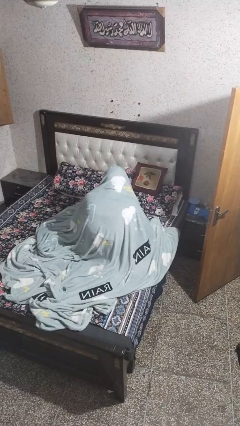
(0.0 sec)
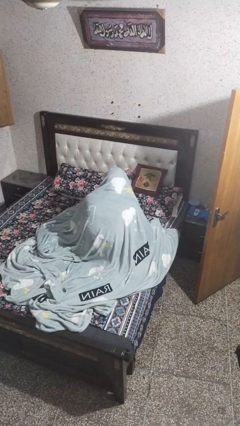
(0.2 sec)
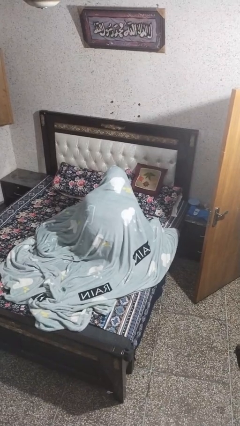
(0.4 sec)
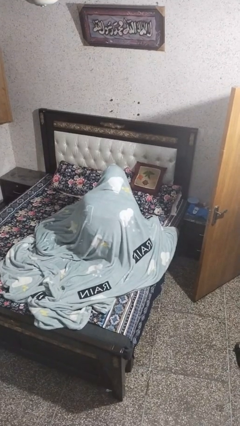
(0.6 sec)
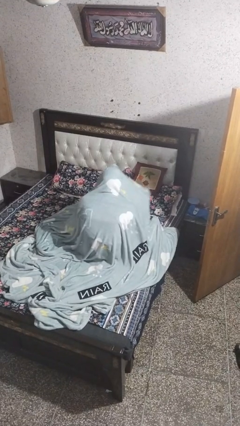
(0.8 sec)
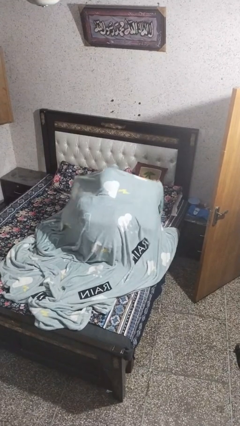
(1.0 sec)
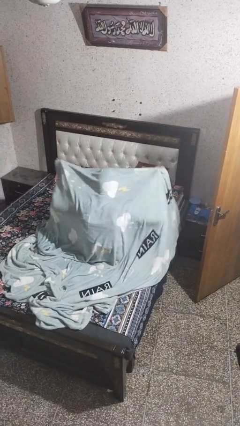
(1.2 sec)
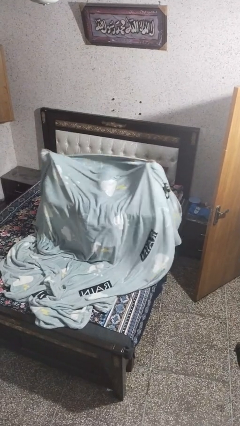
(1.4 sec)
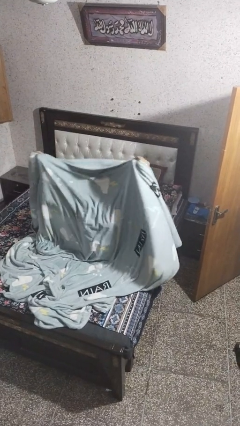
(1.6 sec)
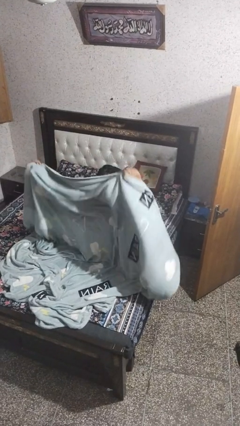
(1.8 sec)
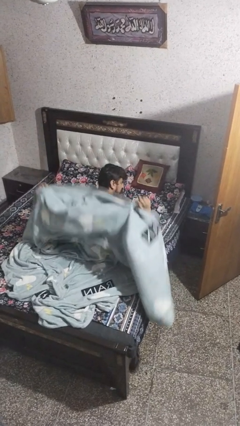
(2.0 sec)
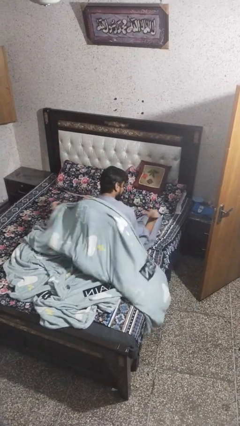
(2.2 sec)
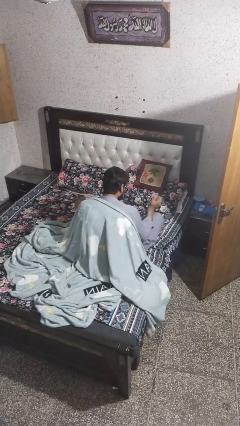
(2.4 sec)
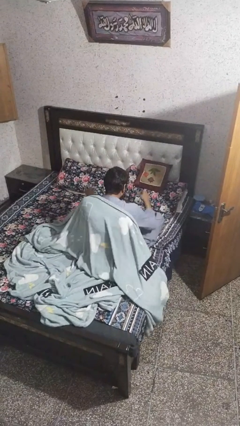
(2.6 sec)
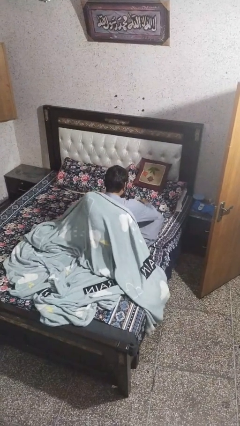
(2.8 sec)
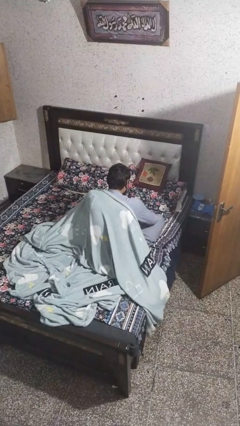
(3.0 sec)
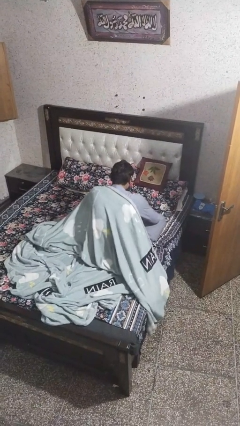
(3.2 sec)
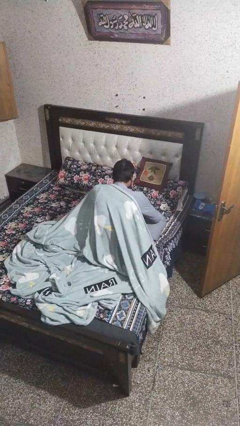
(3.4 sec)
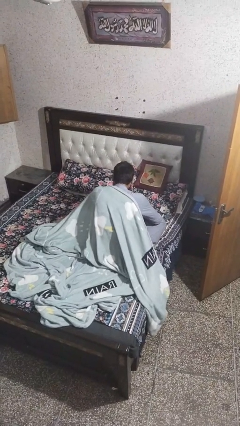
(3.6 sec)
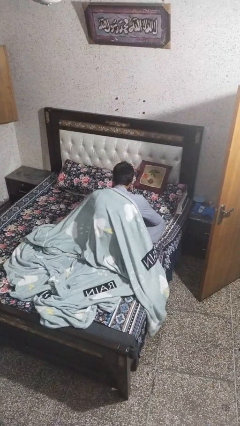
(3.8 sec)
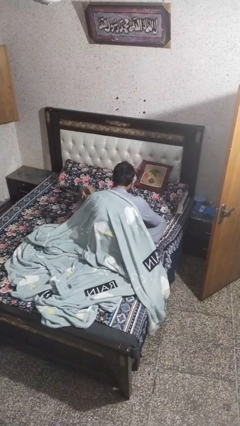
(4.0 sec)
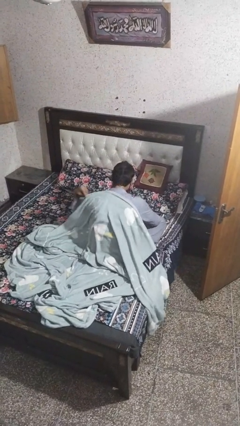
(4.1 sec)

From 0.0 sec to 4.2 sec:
person uncovers with blanket

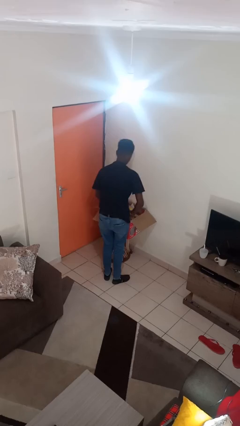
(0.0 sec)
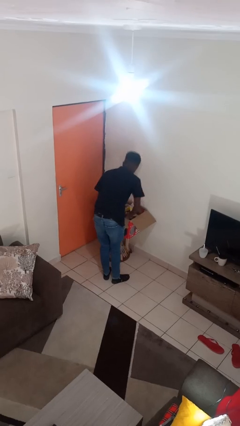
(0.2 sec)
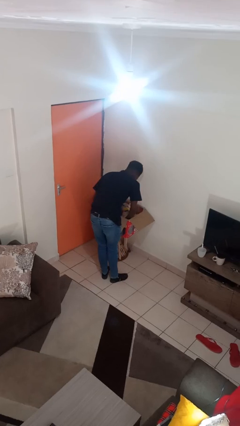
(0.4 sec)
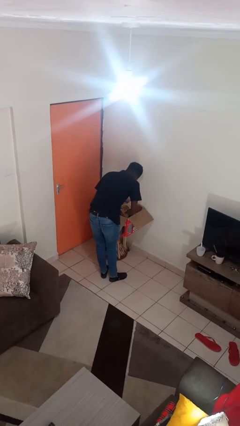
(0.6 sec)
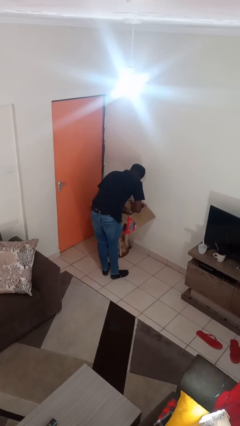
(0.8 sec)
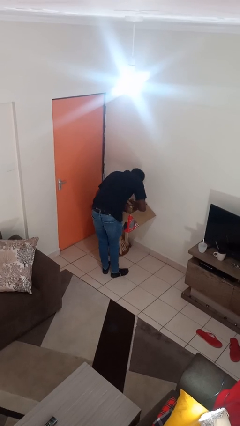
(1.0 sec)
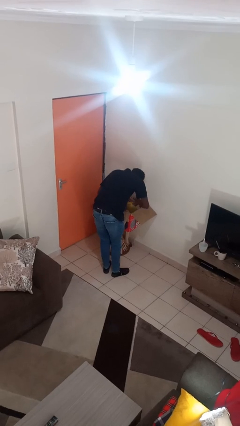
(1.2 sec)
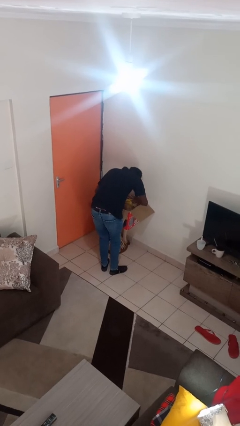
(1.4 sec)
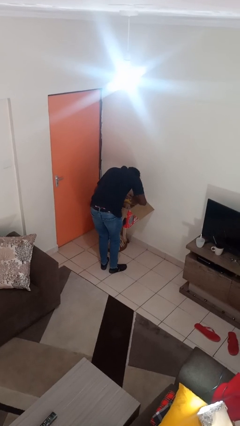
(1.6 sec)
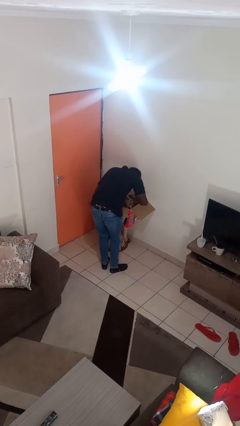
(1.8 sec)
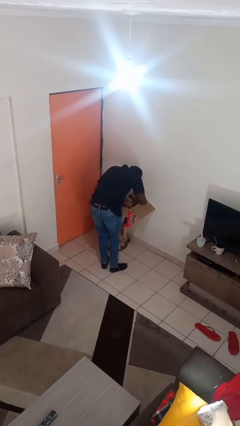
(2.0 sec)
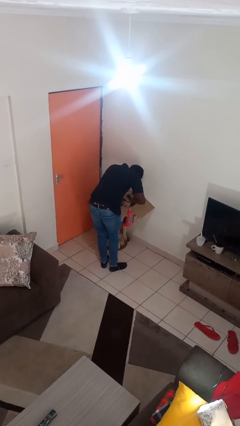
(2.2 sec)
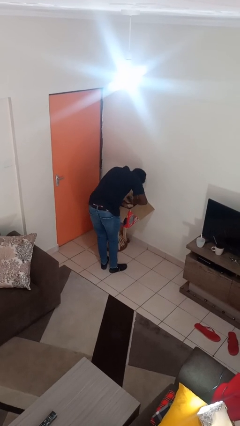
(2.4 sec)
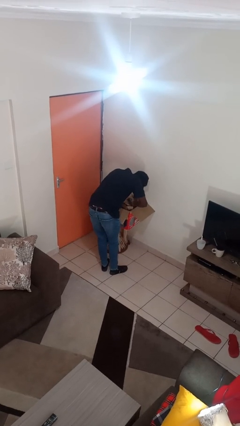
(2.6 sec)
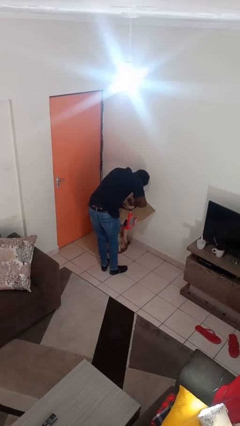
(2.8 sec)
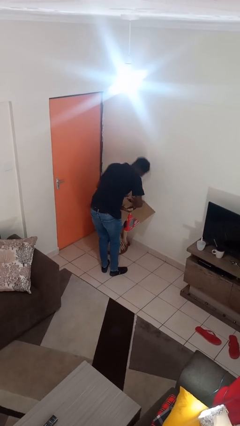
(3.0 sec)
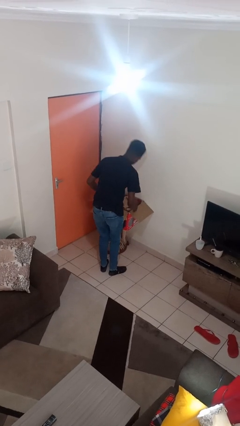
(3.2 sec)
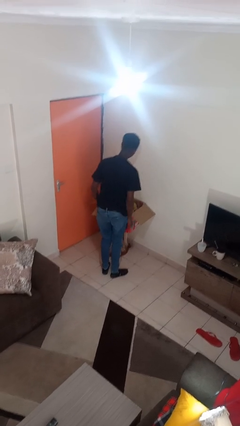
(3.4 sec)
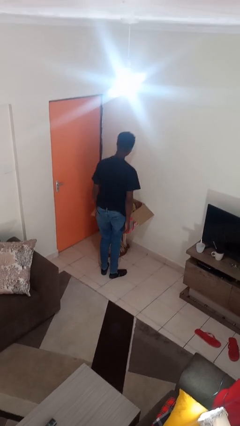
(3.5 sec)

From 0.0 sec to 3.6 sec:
person searches in box

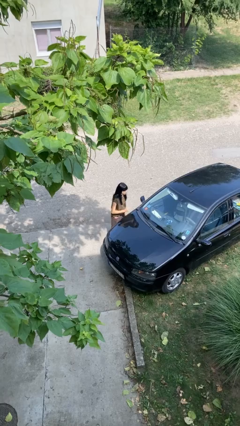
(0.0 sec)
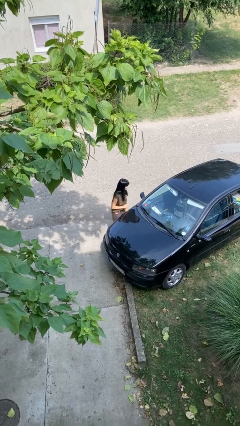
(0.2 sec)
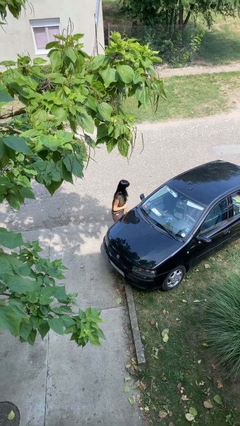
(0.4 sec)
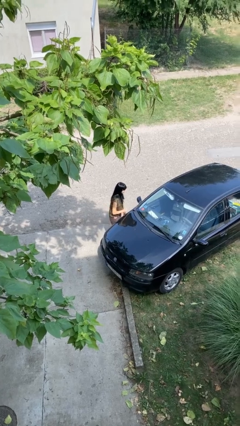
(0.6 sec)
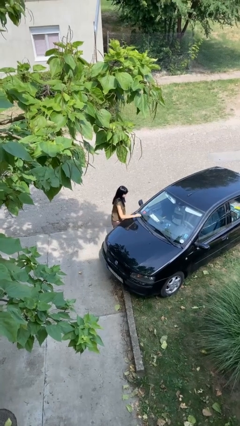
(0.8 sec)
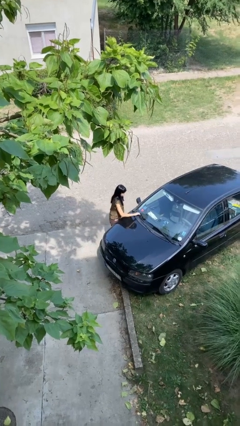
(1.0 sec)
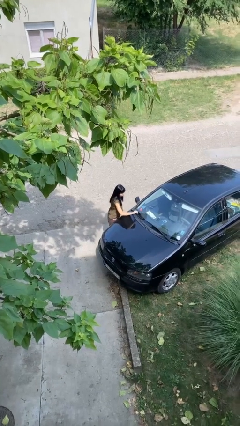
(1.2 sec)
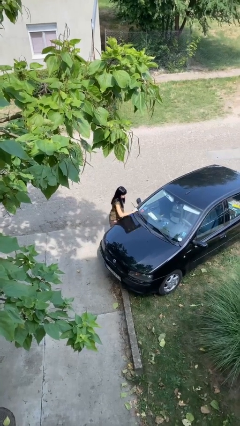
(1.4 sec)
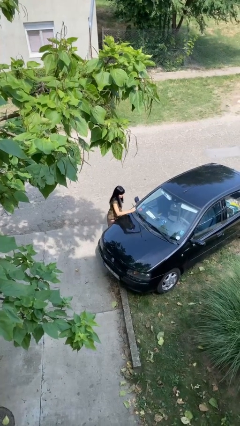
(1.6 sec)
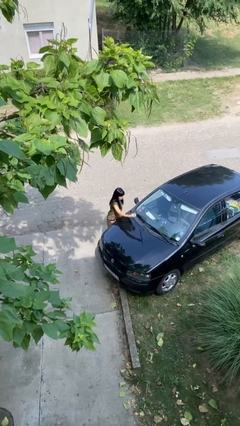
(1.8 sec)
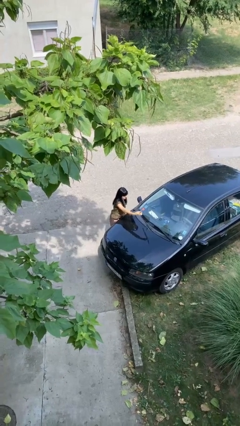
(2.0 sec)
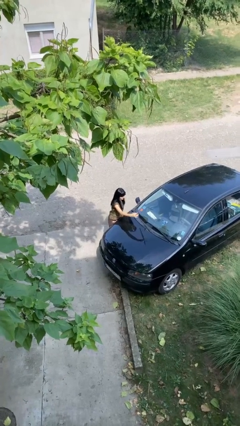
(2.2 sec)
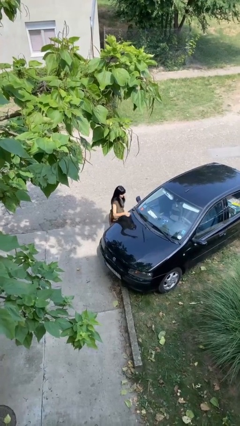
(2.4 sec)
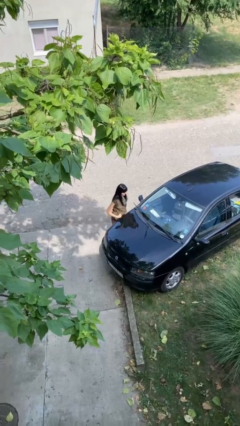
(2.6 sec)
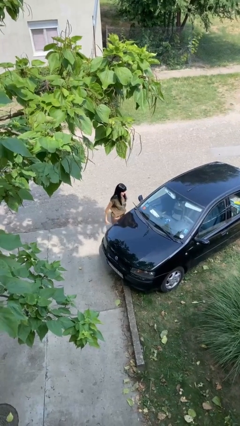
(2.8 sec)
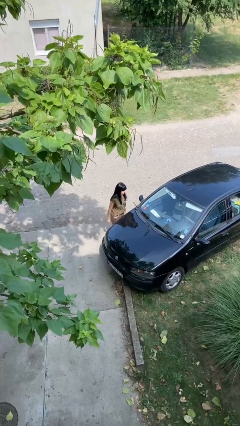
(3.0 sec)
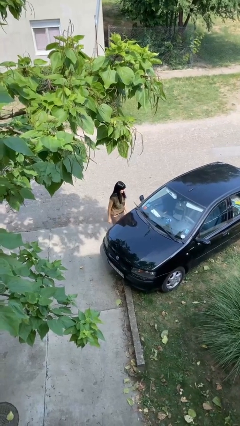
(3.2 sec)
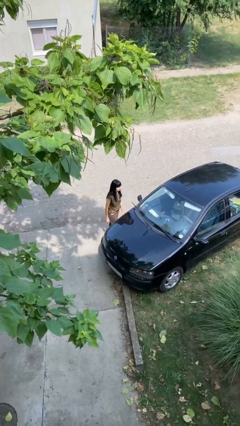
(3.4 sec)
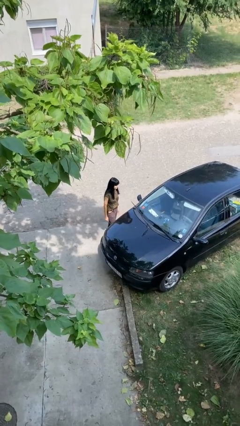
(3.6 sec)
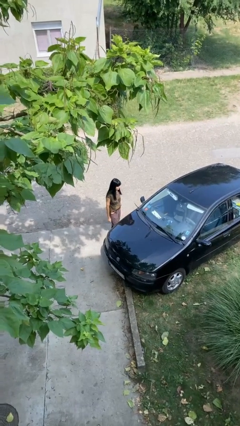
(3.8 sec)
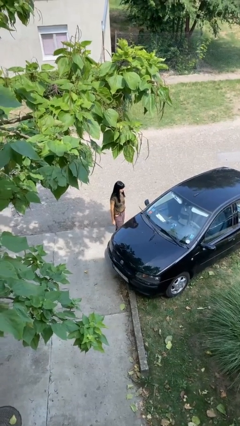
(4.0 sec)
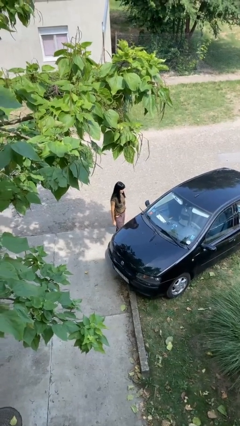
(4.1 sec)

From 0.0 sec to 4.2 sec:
person flips up car wipers

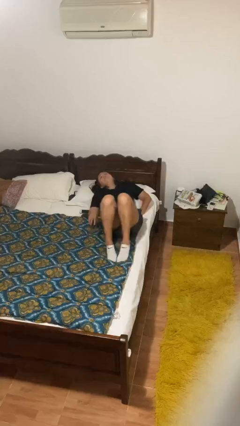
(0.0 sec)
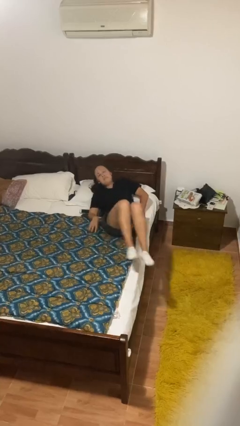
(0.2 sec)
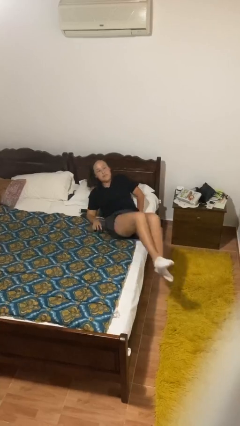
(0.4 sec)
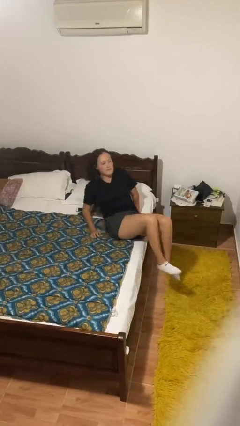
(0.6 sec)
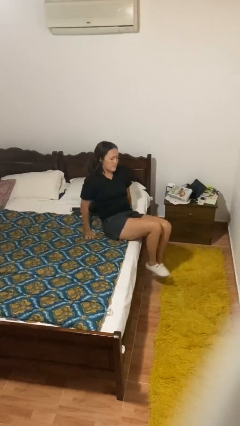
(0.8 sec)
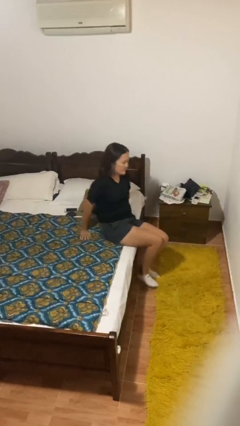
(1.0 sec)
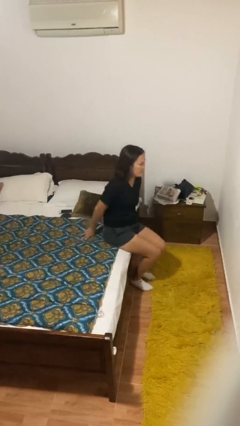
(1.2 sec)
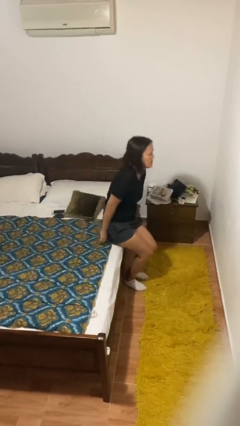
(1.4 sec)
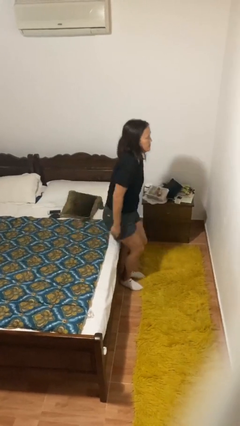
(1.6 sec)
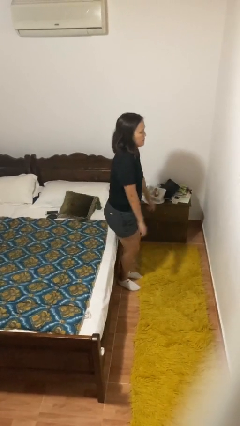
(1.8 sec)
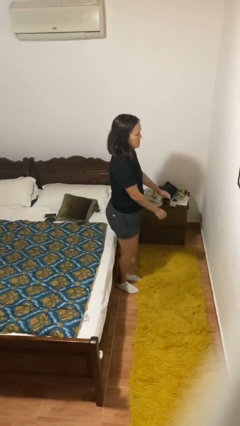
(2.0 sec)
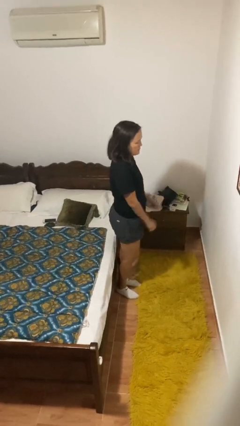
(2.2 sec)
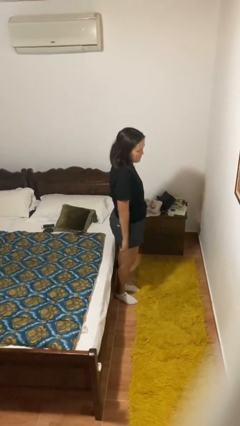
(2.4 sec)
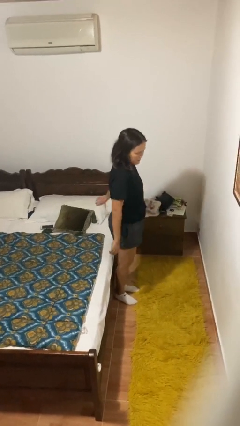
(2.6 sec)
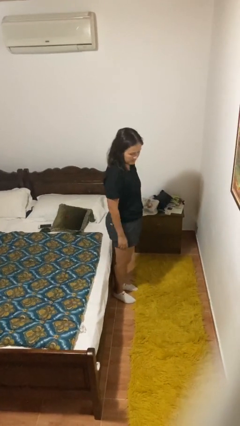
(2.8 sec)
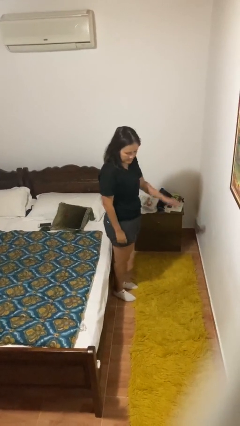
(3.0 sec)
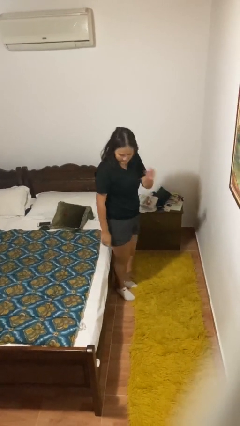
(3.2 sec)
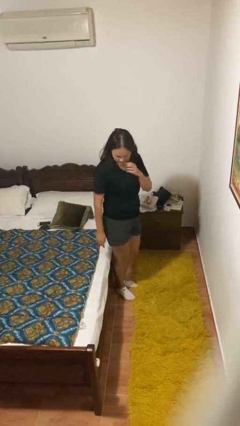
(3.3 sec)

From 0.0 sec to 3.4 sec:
person stands up

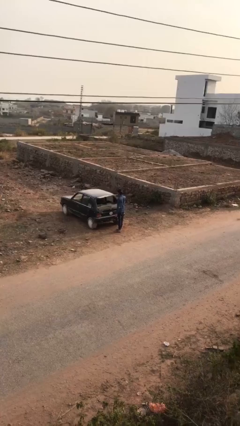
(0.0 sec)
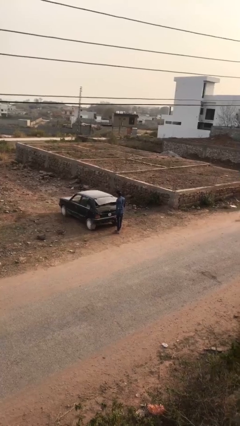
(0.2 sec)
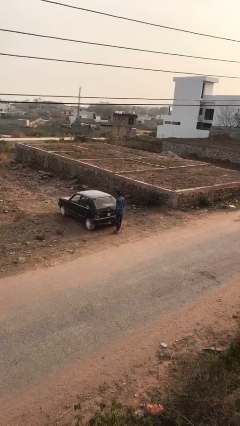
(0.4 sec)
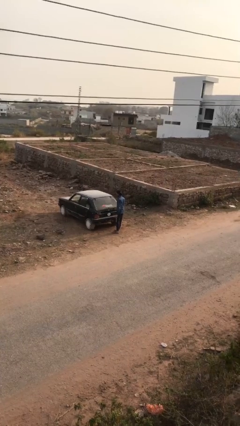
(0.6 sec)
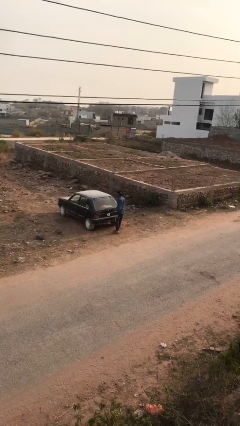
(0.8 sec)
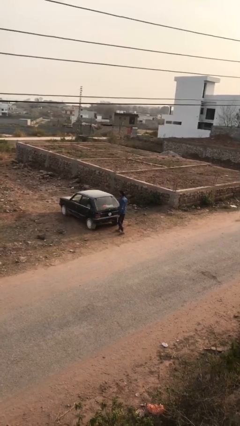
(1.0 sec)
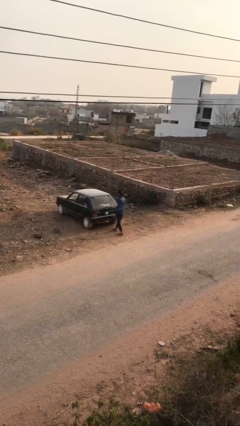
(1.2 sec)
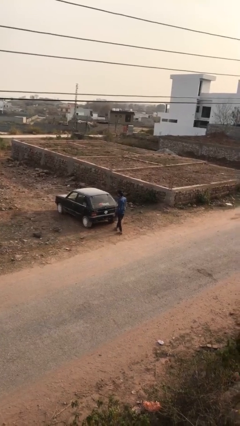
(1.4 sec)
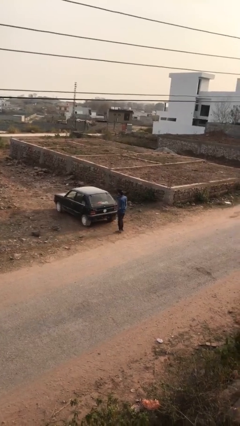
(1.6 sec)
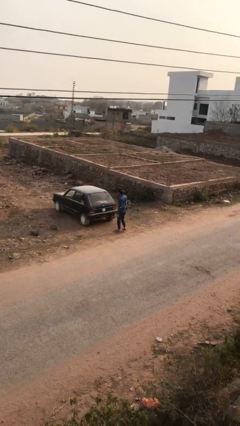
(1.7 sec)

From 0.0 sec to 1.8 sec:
person closes car trunk

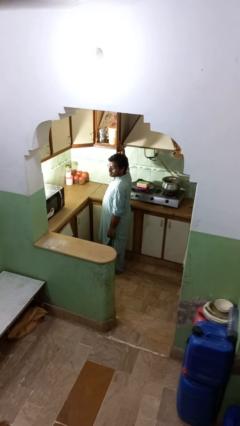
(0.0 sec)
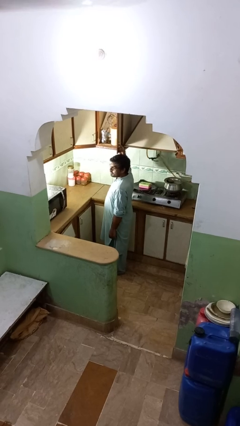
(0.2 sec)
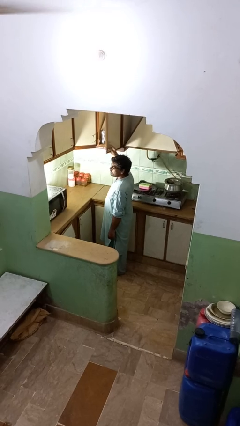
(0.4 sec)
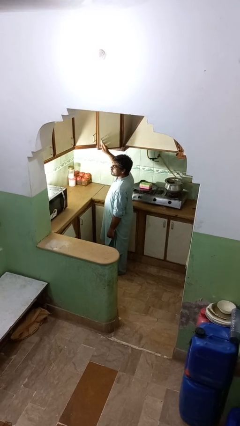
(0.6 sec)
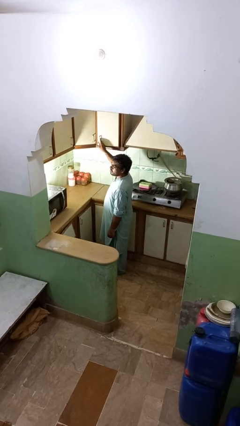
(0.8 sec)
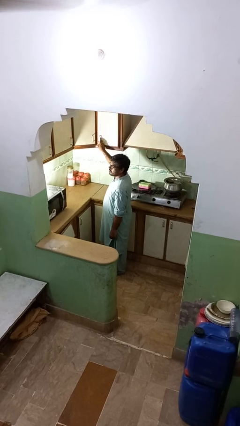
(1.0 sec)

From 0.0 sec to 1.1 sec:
person closes kitchen drawer
